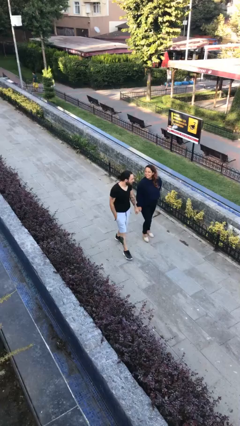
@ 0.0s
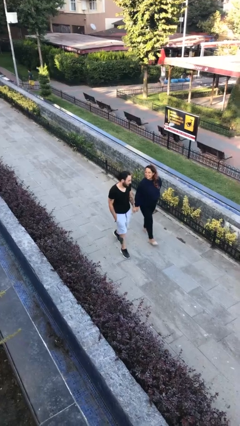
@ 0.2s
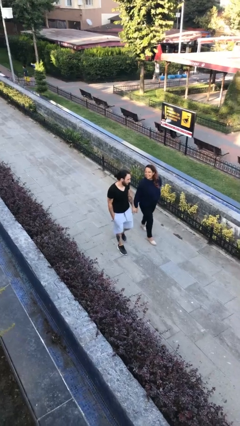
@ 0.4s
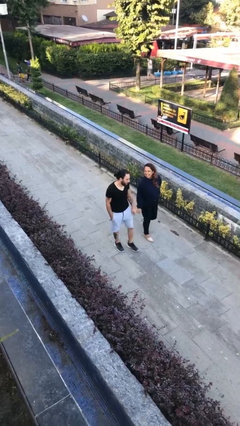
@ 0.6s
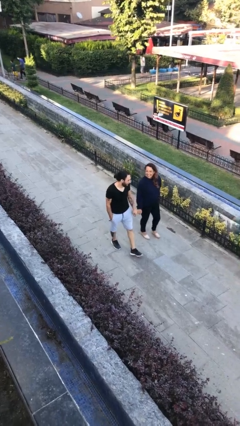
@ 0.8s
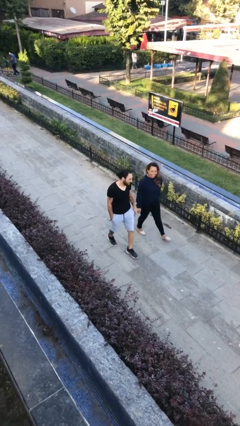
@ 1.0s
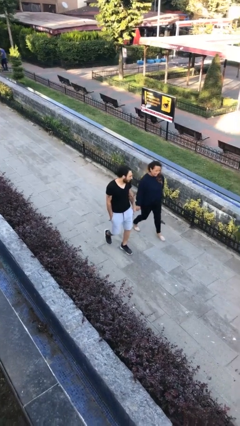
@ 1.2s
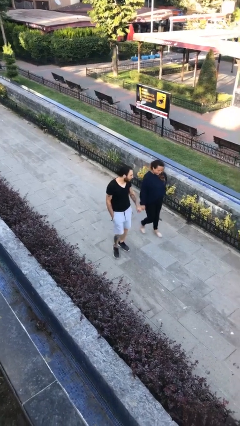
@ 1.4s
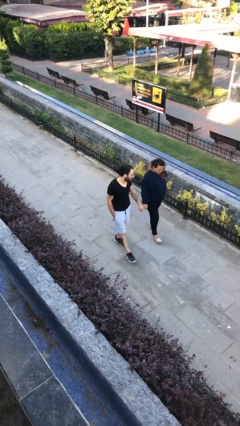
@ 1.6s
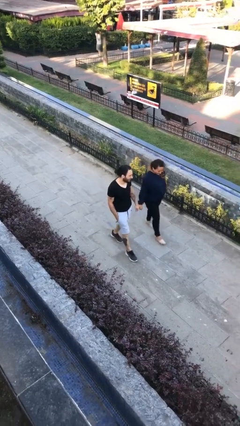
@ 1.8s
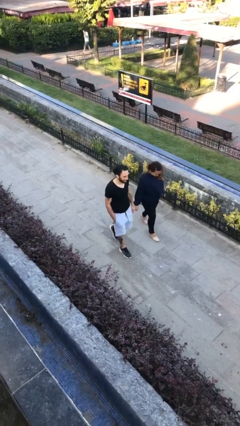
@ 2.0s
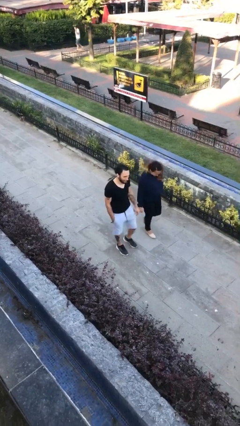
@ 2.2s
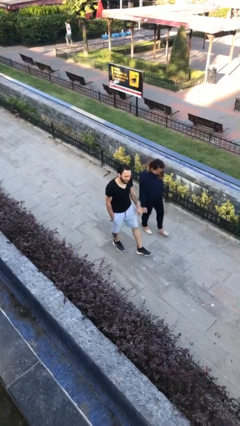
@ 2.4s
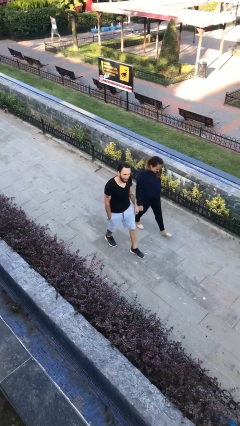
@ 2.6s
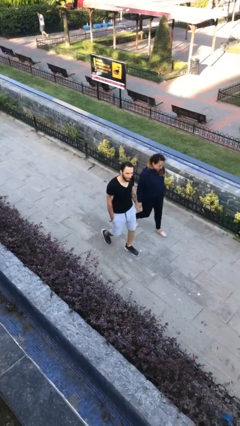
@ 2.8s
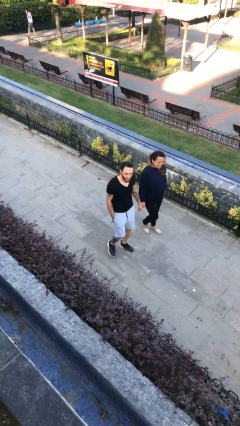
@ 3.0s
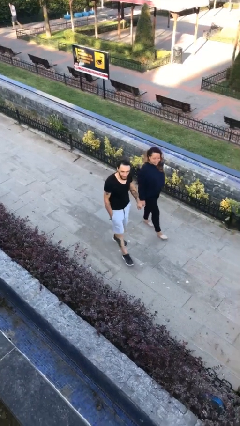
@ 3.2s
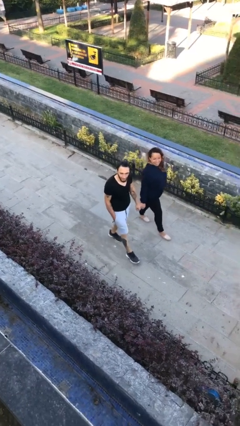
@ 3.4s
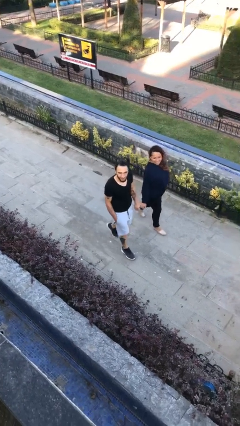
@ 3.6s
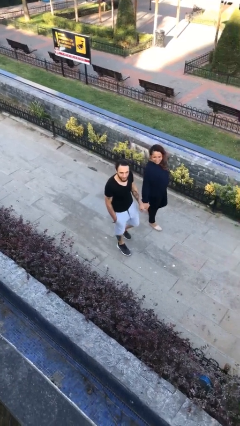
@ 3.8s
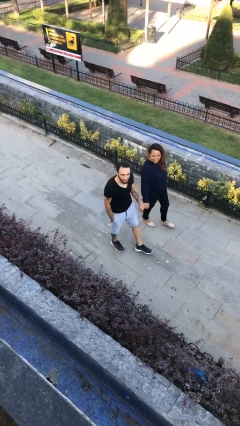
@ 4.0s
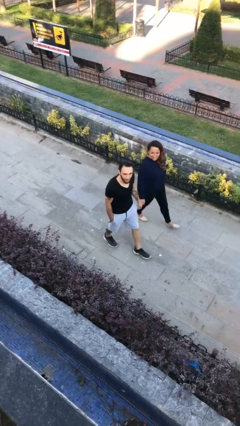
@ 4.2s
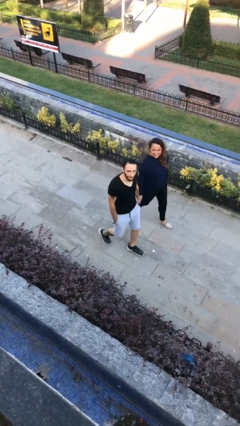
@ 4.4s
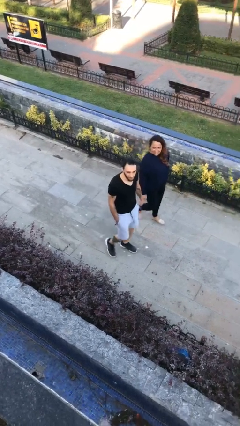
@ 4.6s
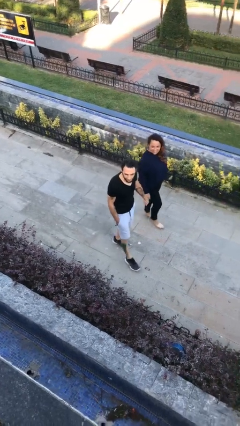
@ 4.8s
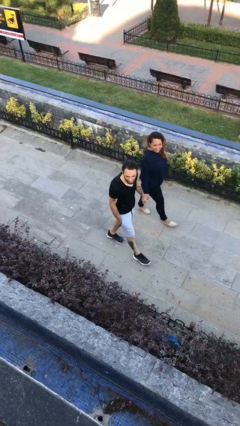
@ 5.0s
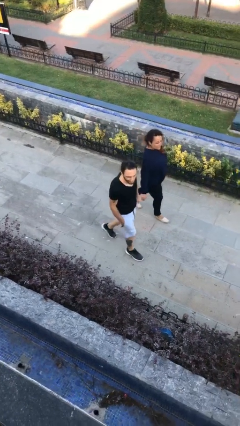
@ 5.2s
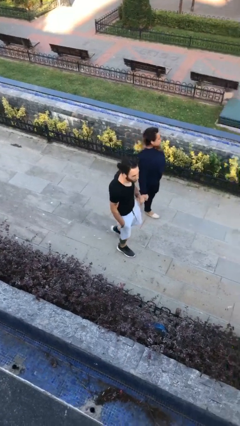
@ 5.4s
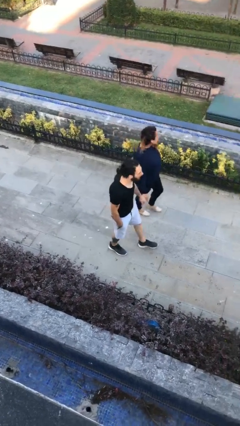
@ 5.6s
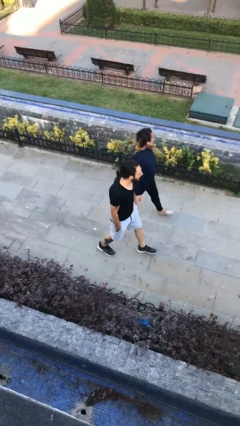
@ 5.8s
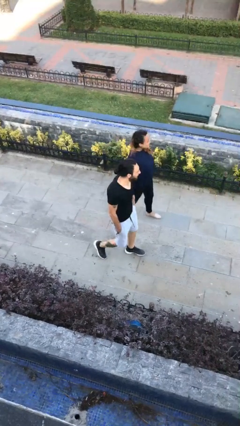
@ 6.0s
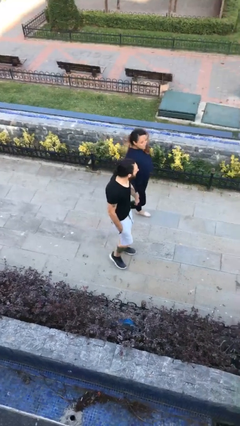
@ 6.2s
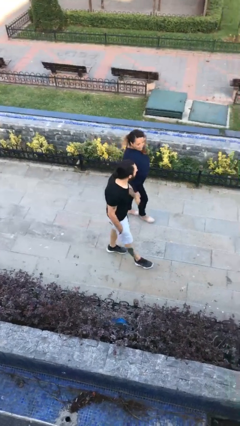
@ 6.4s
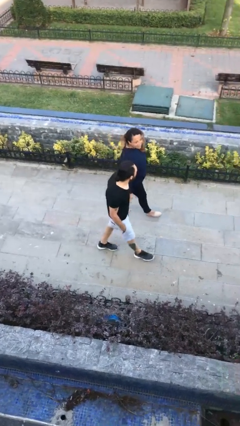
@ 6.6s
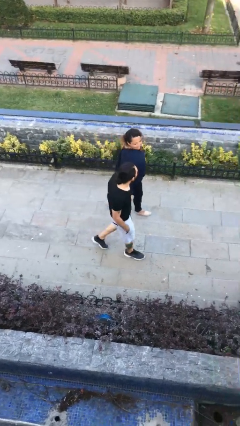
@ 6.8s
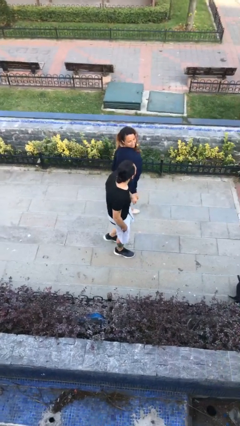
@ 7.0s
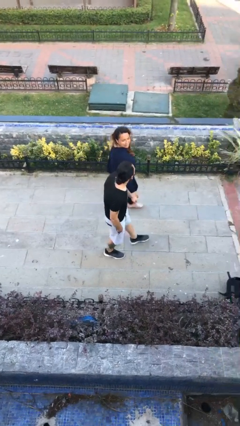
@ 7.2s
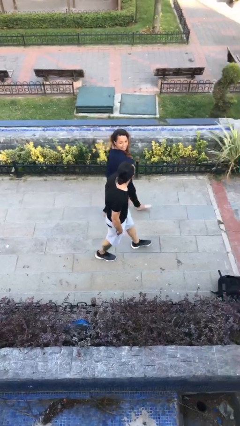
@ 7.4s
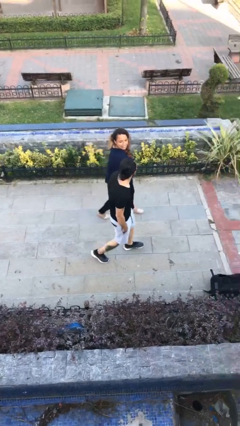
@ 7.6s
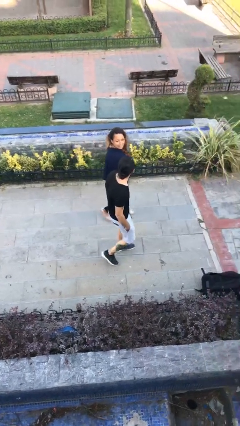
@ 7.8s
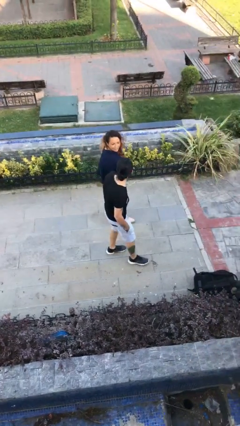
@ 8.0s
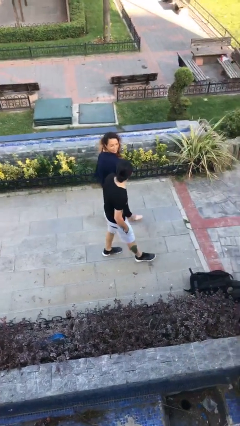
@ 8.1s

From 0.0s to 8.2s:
person holds hand

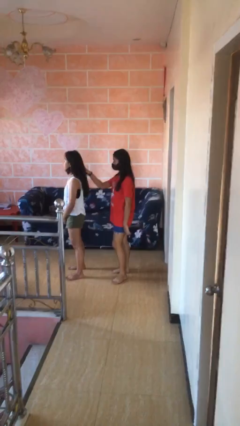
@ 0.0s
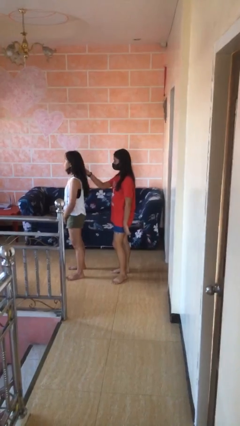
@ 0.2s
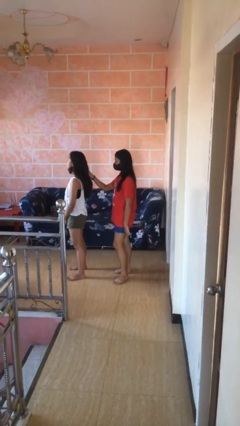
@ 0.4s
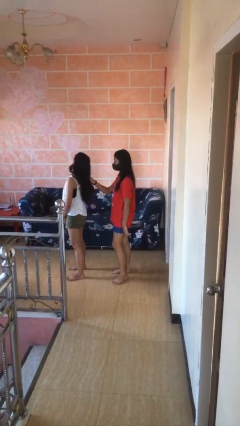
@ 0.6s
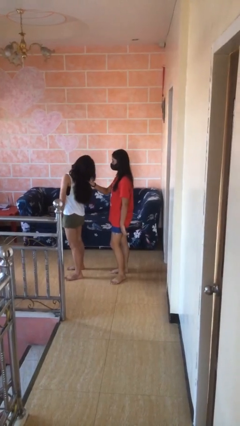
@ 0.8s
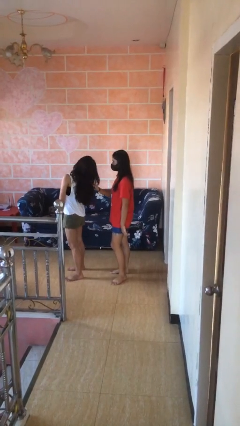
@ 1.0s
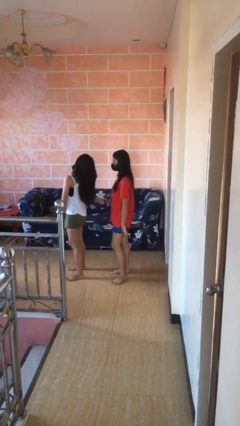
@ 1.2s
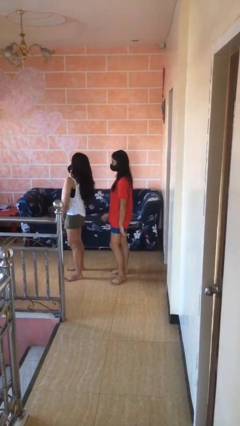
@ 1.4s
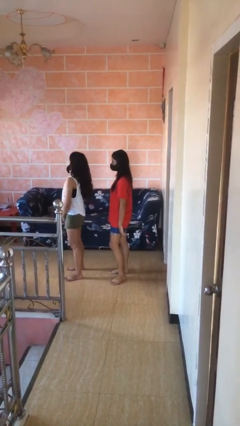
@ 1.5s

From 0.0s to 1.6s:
person grabs person by hair

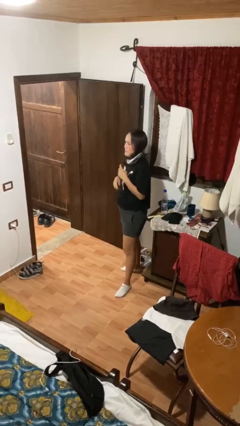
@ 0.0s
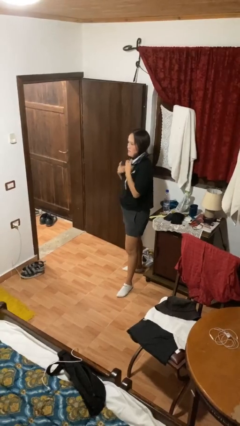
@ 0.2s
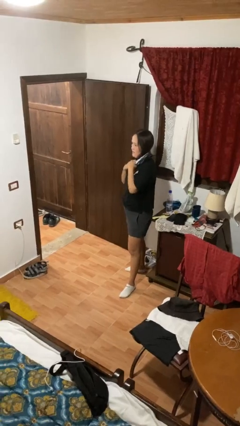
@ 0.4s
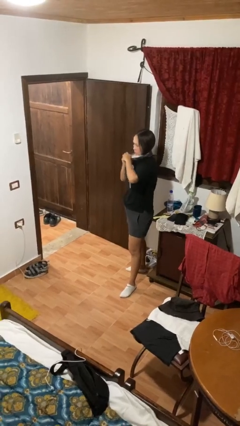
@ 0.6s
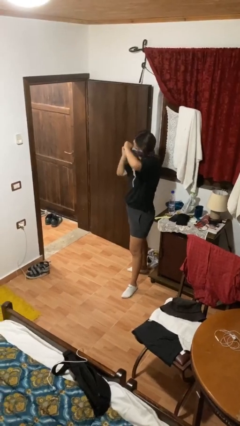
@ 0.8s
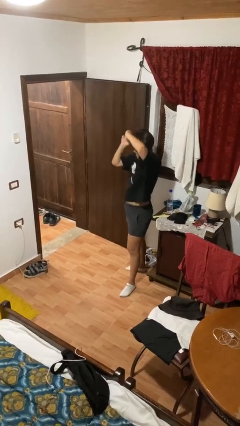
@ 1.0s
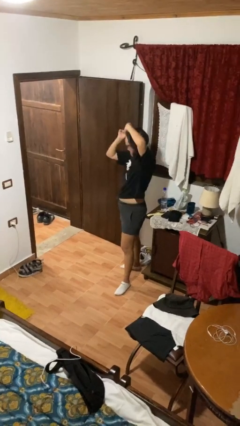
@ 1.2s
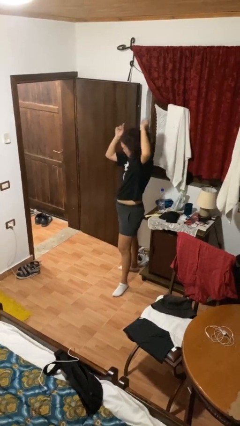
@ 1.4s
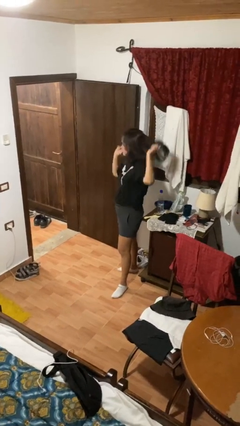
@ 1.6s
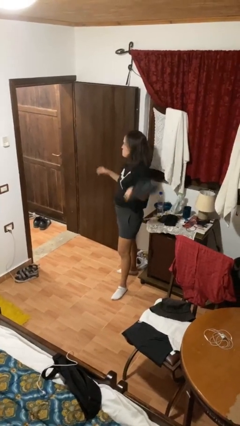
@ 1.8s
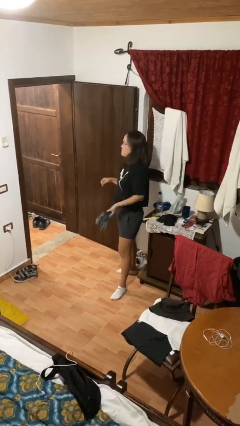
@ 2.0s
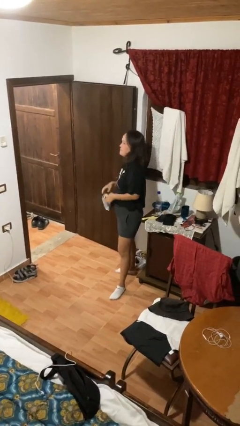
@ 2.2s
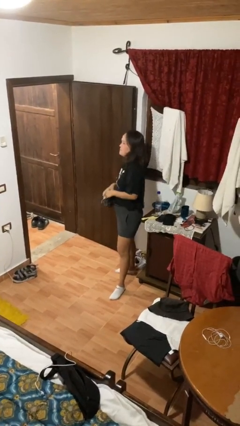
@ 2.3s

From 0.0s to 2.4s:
person takes off scarf

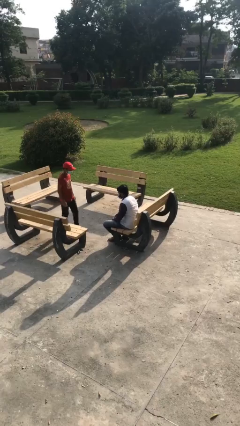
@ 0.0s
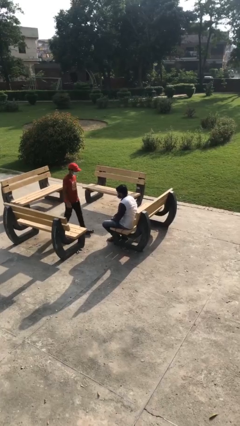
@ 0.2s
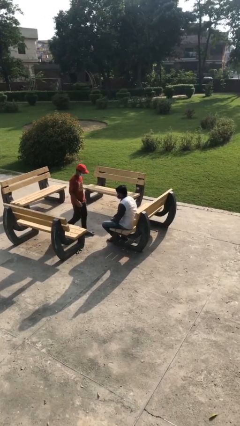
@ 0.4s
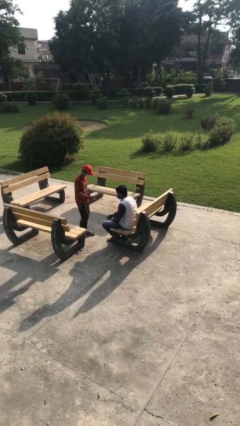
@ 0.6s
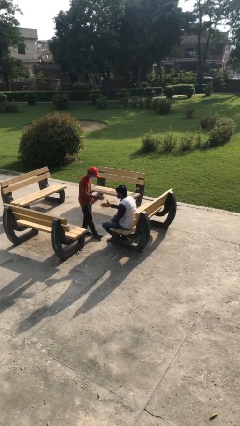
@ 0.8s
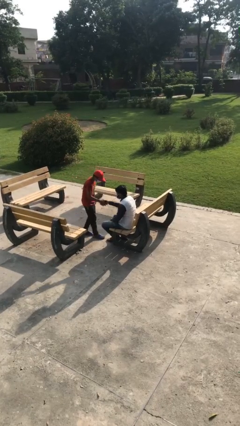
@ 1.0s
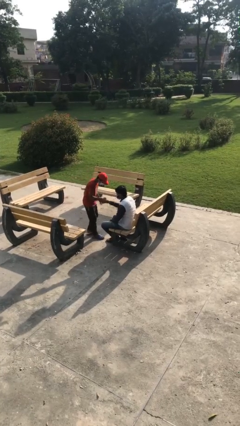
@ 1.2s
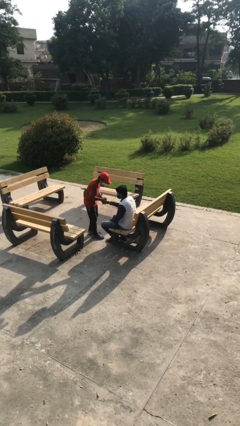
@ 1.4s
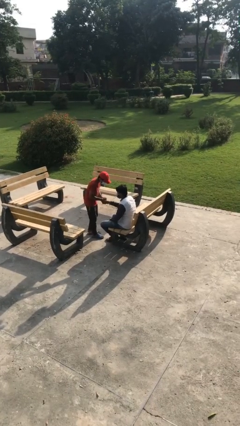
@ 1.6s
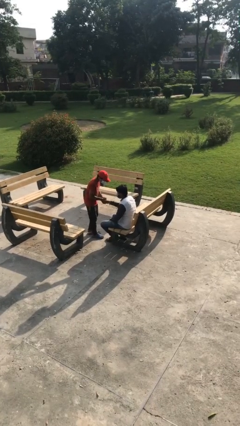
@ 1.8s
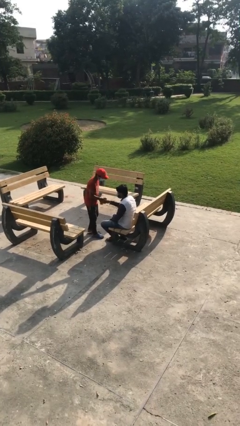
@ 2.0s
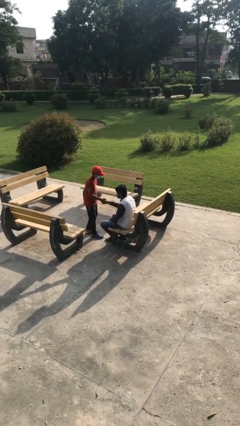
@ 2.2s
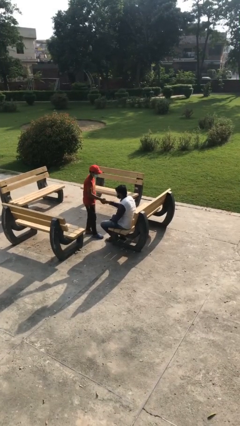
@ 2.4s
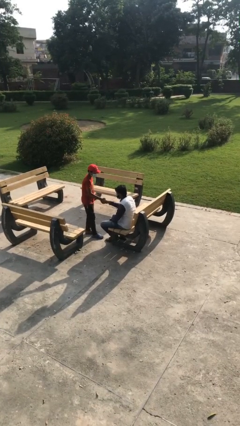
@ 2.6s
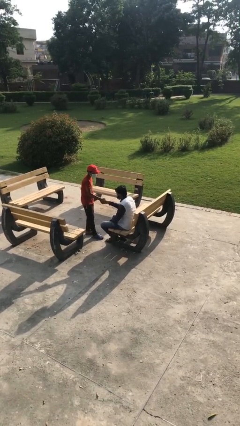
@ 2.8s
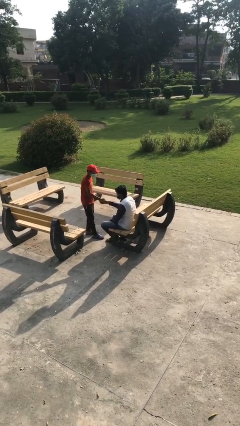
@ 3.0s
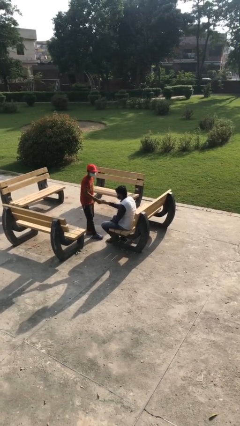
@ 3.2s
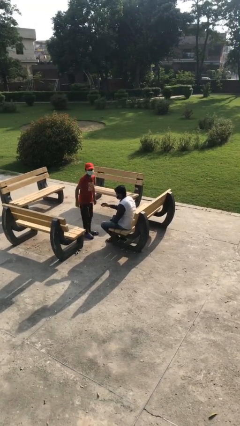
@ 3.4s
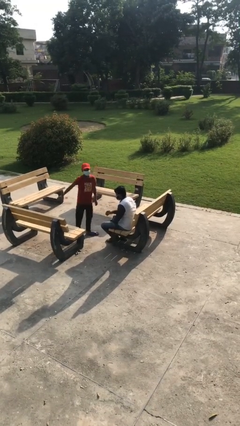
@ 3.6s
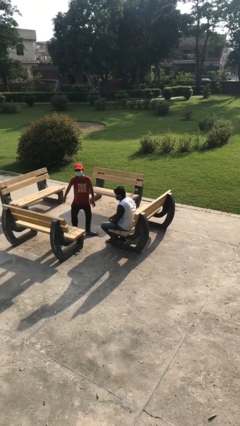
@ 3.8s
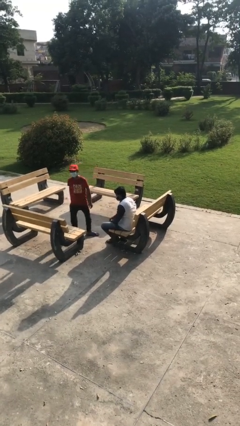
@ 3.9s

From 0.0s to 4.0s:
person shakes hand

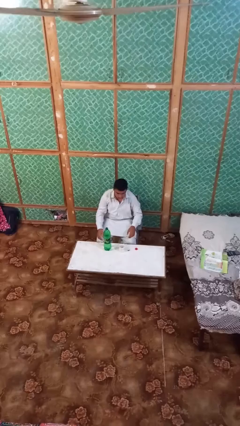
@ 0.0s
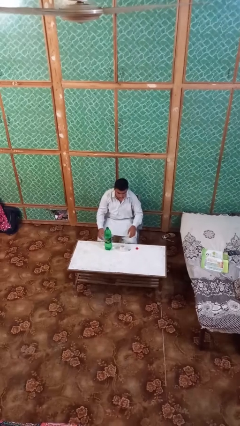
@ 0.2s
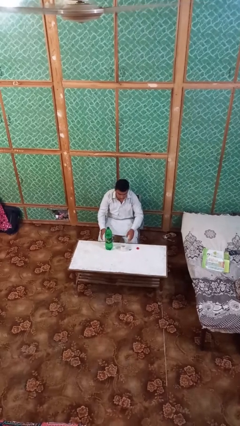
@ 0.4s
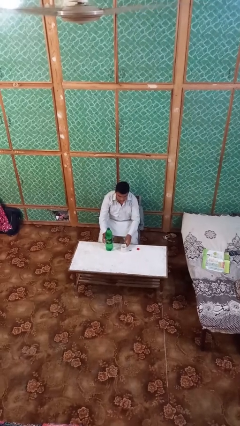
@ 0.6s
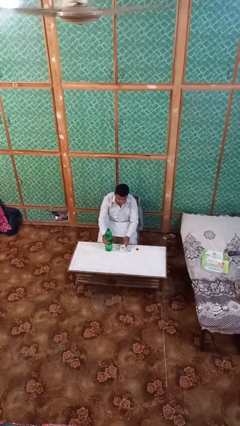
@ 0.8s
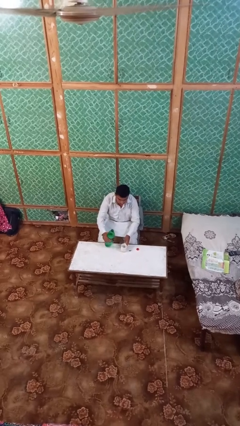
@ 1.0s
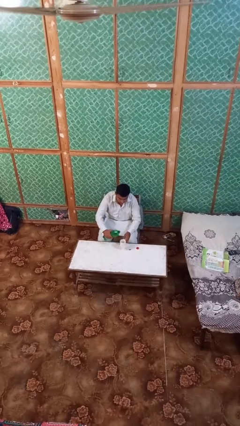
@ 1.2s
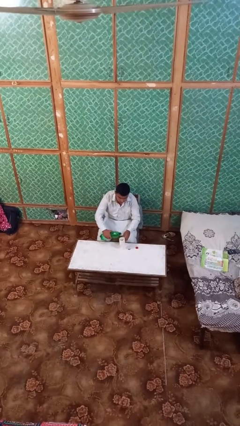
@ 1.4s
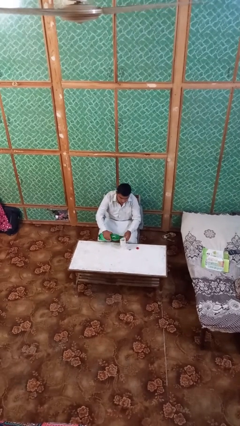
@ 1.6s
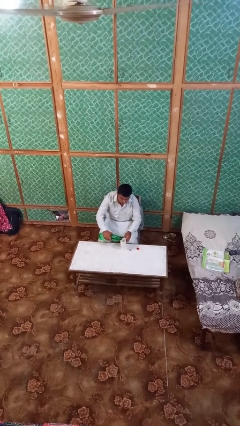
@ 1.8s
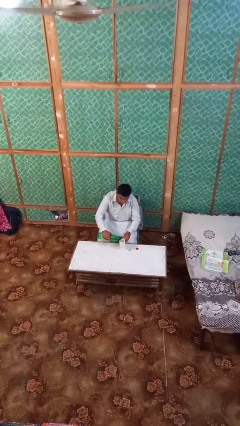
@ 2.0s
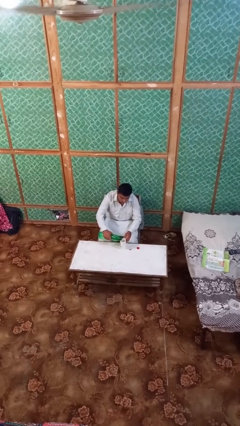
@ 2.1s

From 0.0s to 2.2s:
person pours liquid into cup
